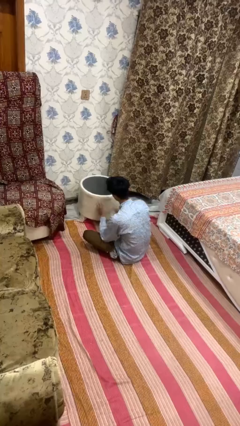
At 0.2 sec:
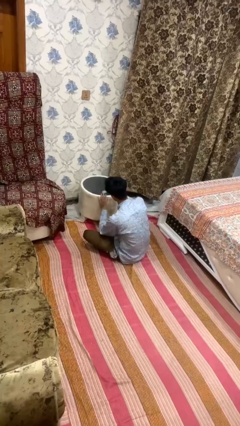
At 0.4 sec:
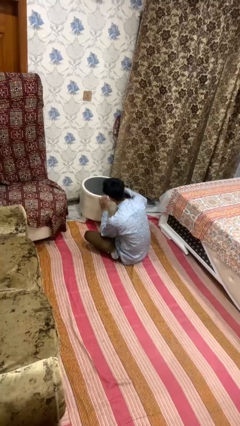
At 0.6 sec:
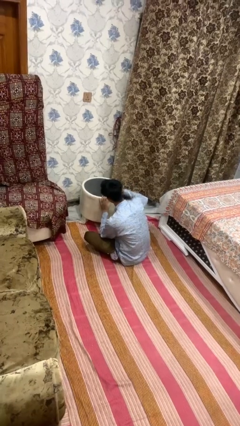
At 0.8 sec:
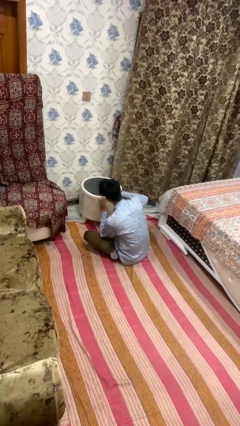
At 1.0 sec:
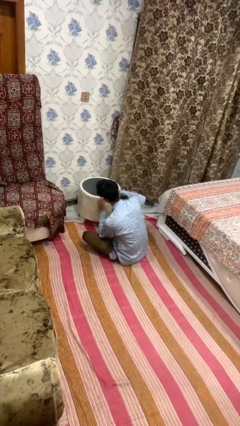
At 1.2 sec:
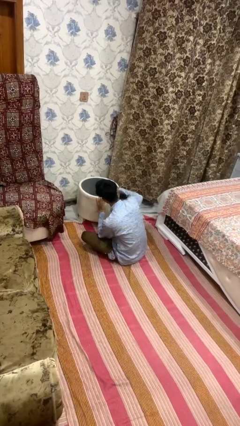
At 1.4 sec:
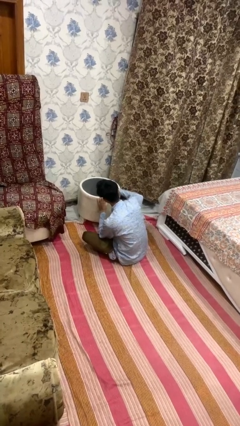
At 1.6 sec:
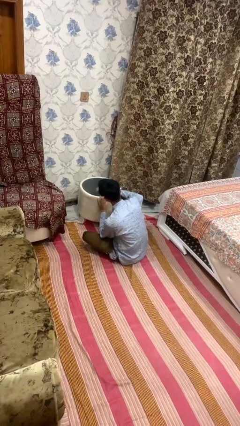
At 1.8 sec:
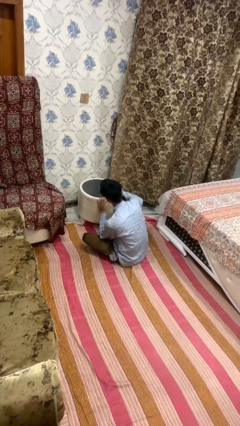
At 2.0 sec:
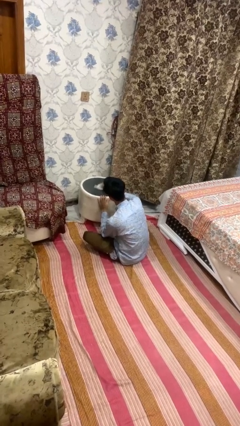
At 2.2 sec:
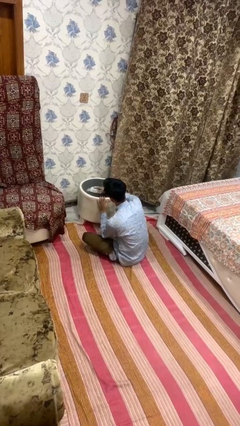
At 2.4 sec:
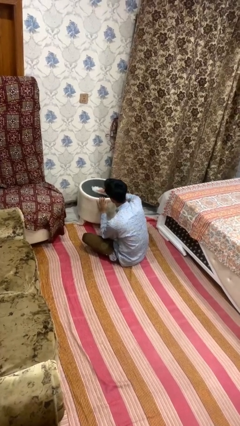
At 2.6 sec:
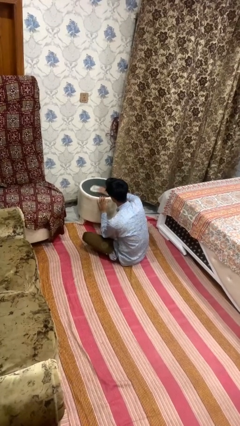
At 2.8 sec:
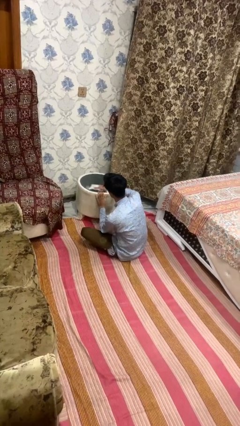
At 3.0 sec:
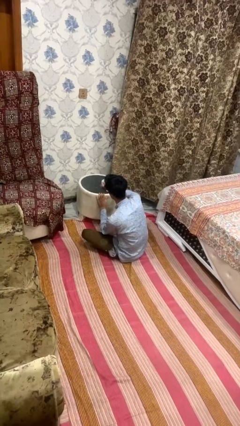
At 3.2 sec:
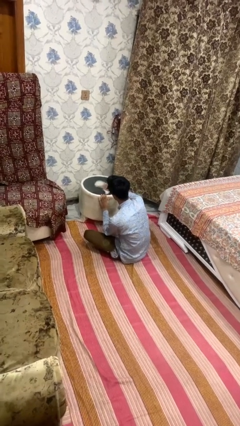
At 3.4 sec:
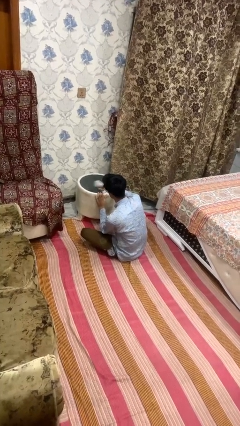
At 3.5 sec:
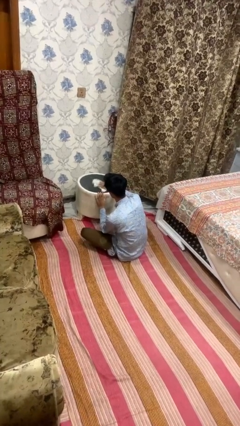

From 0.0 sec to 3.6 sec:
person cleans table with rag

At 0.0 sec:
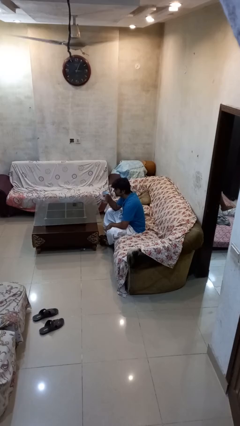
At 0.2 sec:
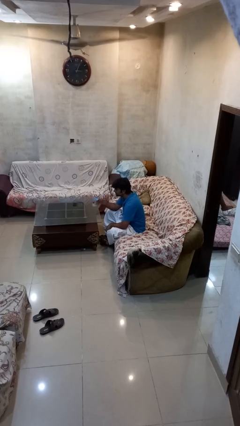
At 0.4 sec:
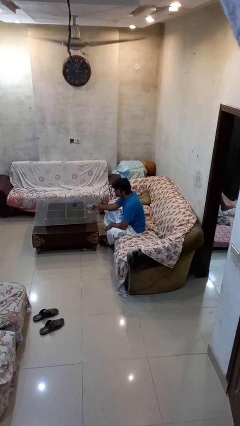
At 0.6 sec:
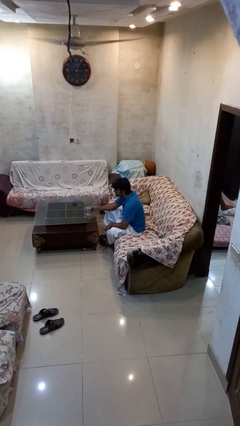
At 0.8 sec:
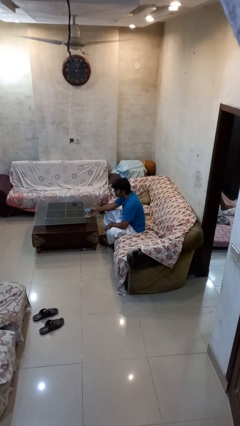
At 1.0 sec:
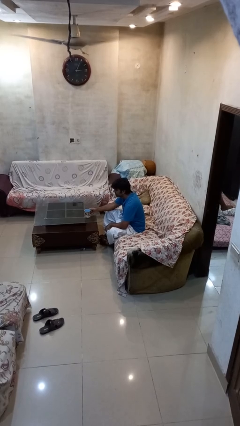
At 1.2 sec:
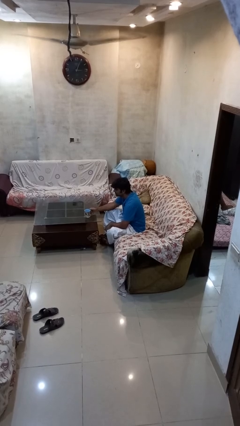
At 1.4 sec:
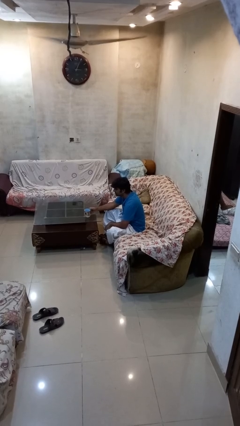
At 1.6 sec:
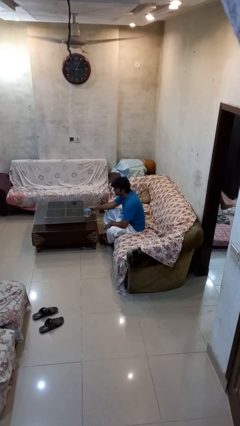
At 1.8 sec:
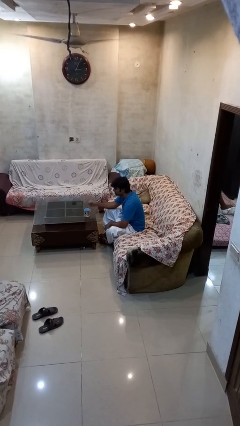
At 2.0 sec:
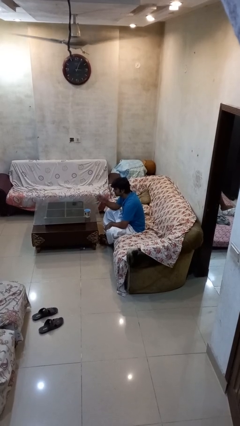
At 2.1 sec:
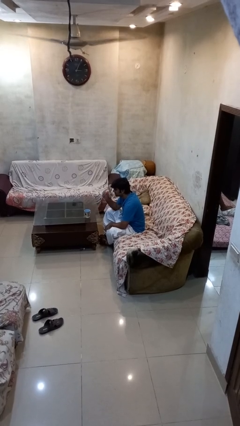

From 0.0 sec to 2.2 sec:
person puts down object on table

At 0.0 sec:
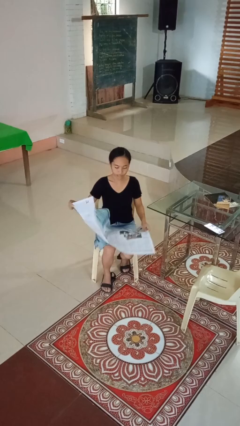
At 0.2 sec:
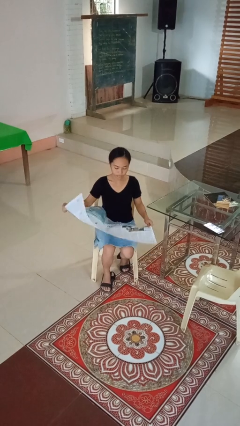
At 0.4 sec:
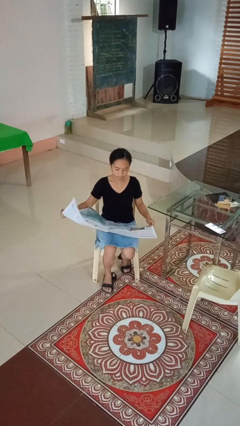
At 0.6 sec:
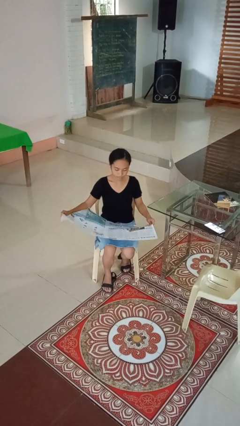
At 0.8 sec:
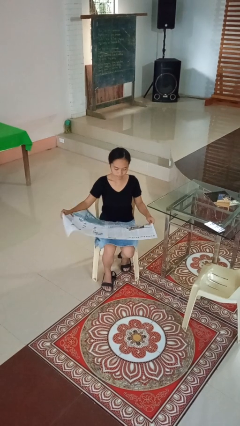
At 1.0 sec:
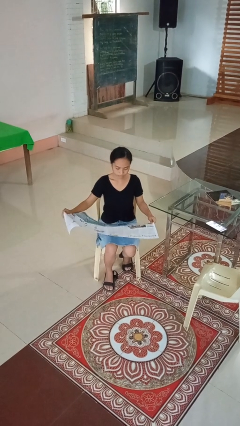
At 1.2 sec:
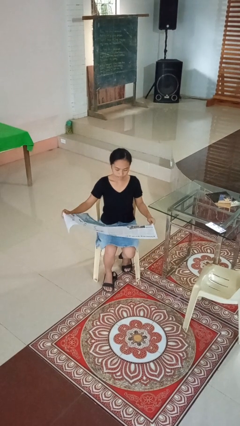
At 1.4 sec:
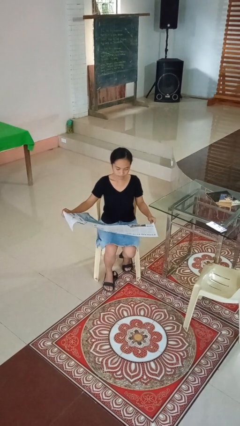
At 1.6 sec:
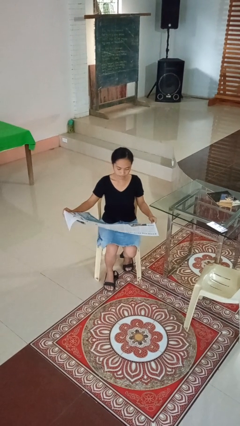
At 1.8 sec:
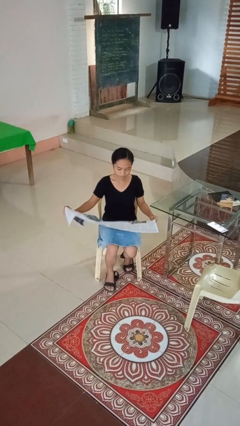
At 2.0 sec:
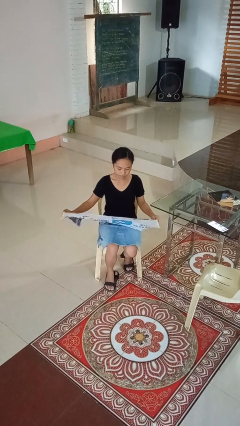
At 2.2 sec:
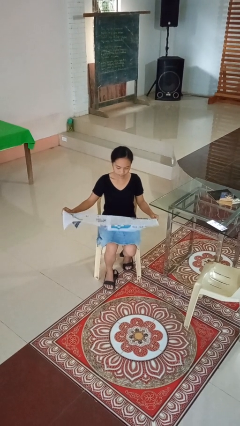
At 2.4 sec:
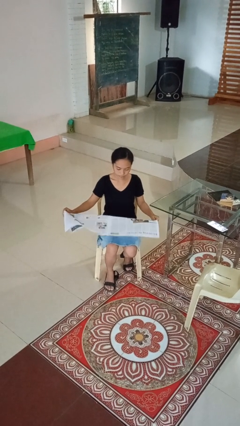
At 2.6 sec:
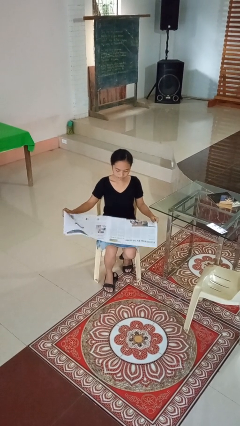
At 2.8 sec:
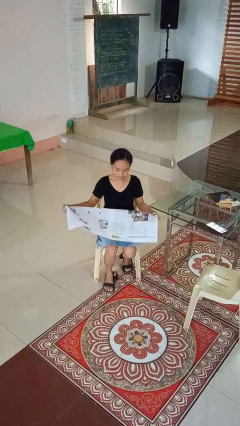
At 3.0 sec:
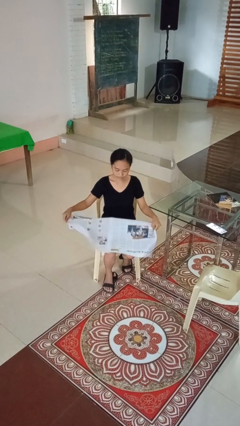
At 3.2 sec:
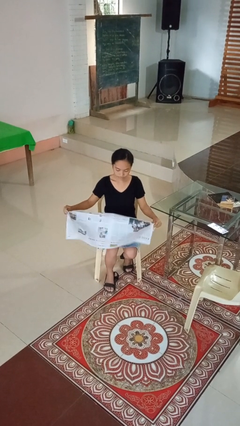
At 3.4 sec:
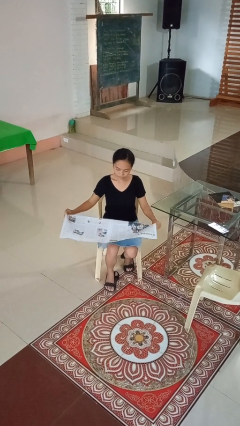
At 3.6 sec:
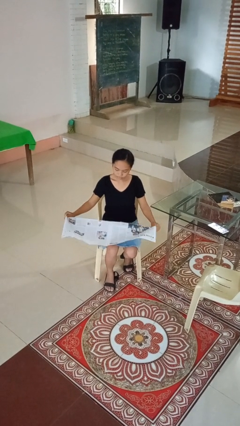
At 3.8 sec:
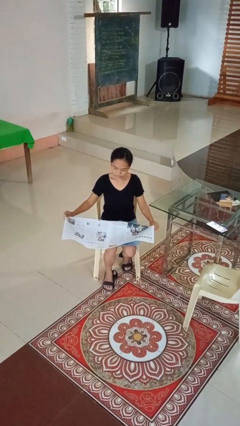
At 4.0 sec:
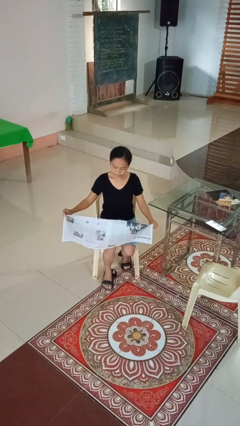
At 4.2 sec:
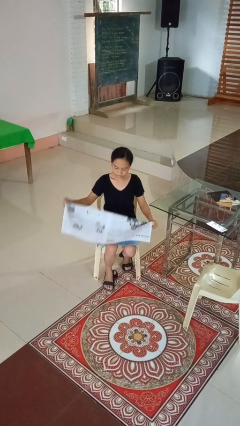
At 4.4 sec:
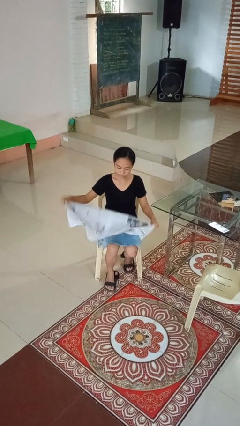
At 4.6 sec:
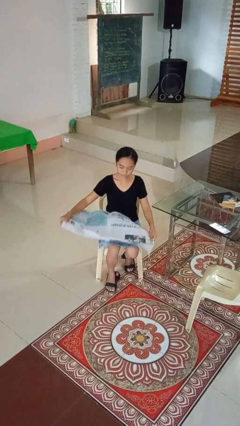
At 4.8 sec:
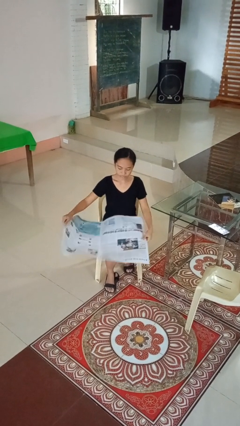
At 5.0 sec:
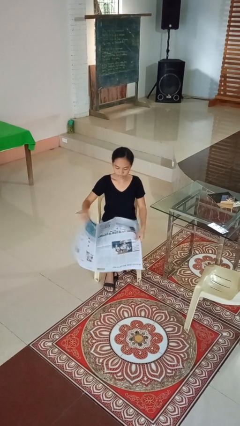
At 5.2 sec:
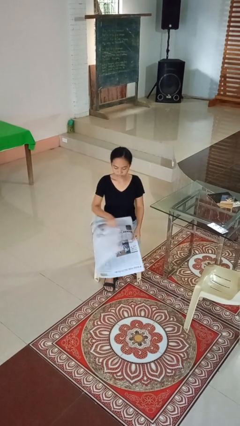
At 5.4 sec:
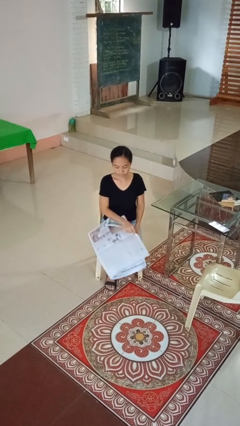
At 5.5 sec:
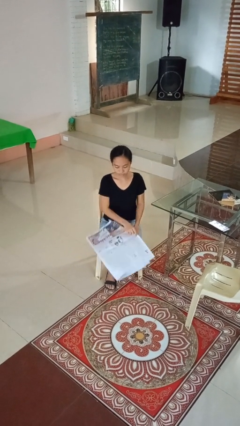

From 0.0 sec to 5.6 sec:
person reads newspaper

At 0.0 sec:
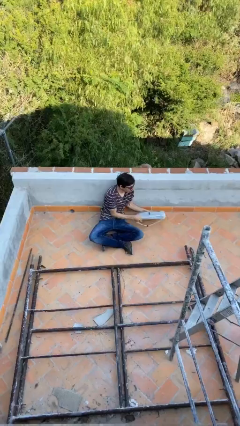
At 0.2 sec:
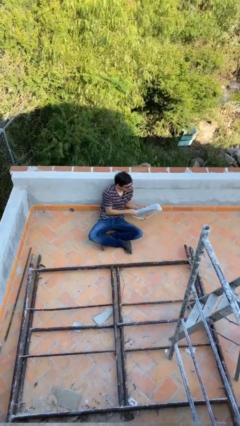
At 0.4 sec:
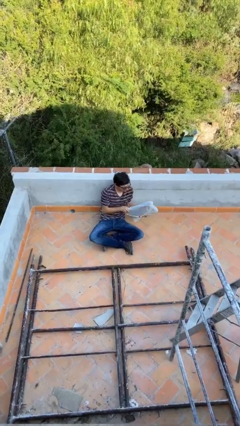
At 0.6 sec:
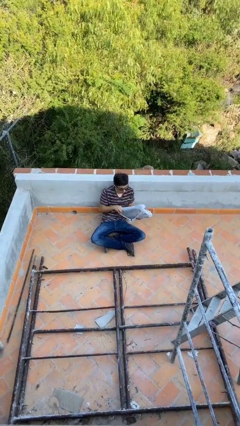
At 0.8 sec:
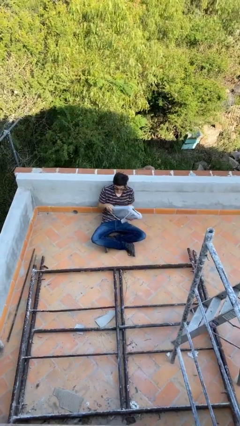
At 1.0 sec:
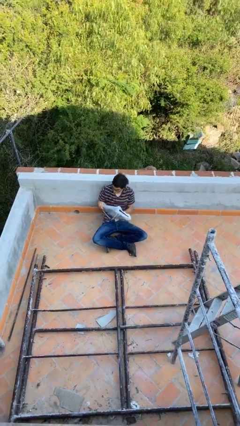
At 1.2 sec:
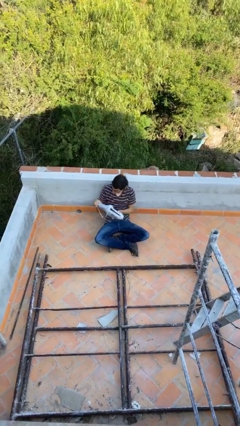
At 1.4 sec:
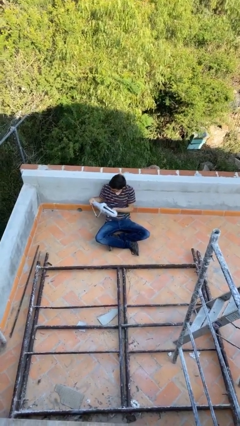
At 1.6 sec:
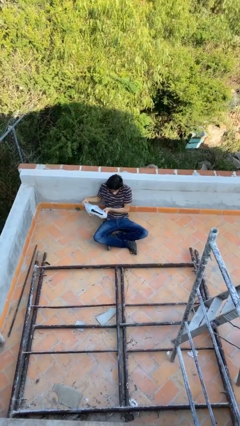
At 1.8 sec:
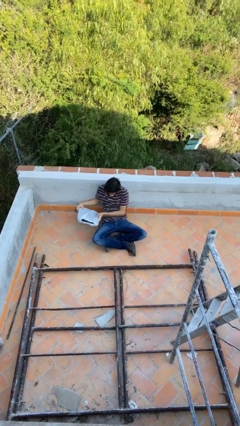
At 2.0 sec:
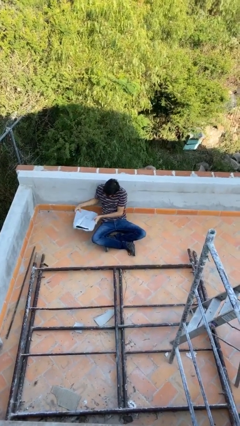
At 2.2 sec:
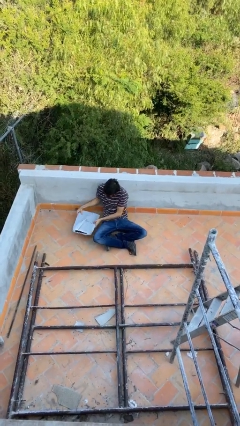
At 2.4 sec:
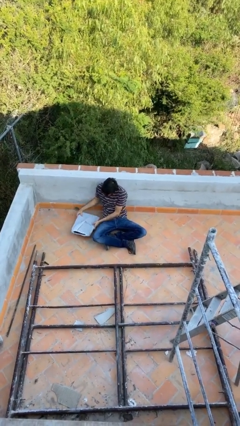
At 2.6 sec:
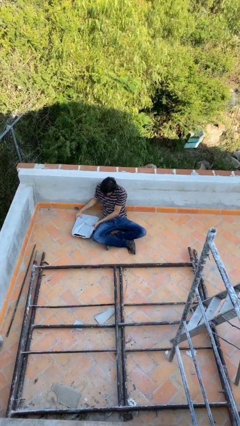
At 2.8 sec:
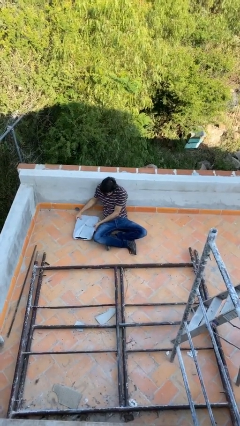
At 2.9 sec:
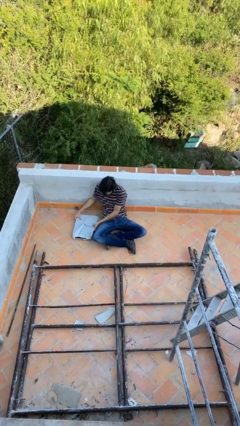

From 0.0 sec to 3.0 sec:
person picks up object from floor

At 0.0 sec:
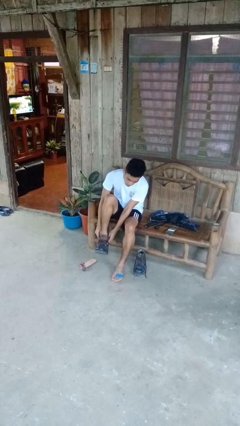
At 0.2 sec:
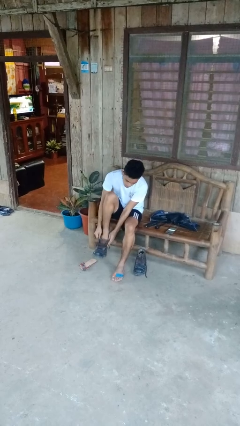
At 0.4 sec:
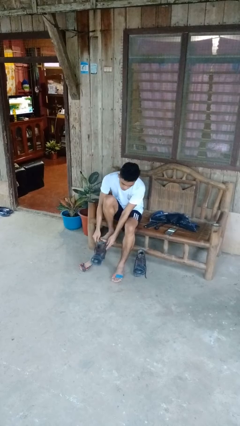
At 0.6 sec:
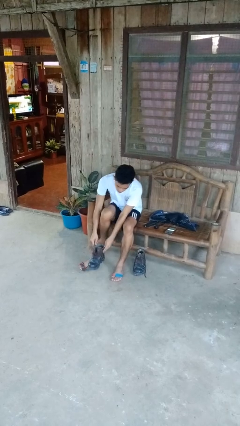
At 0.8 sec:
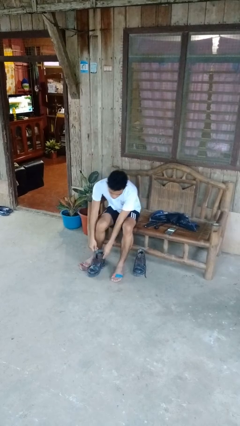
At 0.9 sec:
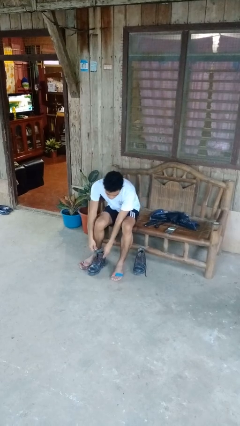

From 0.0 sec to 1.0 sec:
person takes off boots

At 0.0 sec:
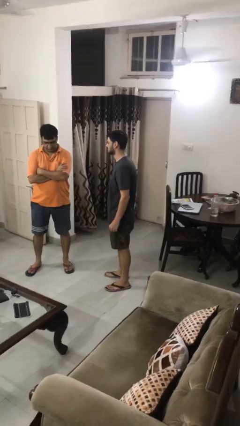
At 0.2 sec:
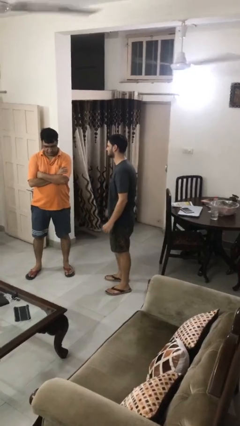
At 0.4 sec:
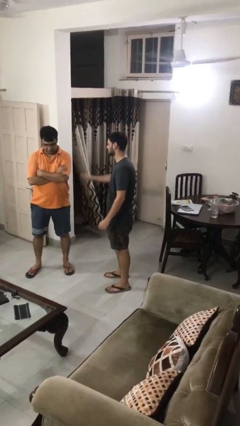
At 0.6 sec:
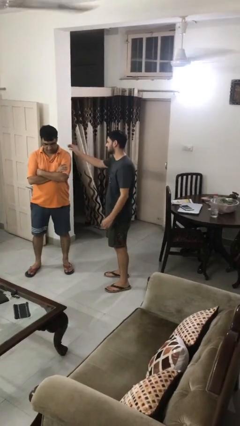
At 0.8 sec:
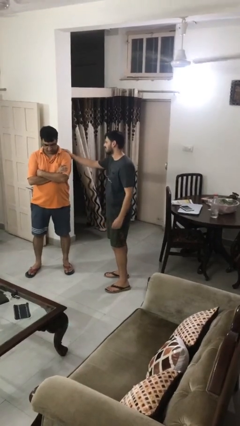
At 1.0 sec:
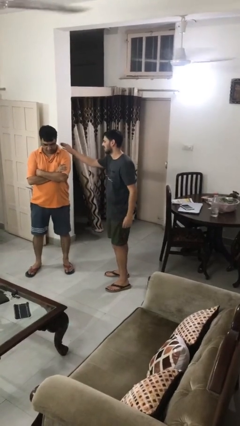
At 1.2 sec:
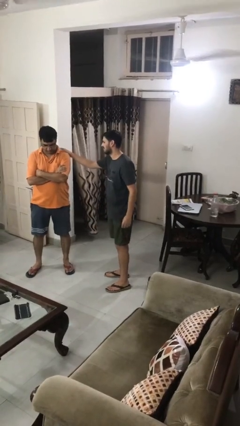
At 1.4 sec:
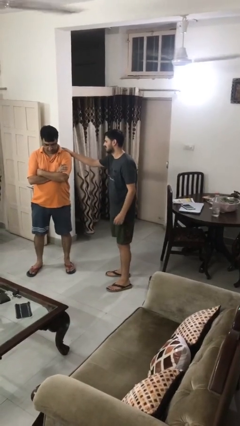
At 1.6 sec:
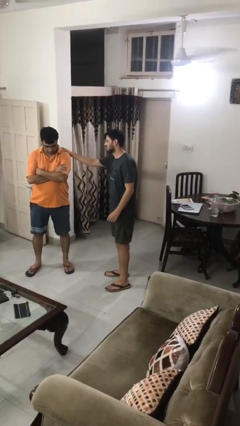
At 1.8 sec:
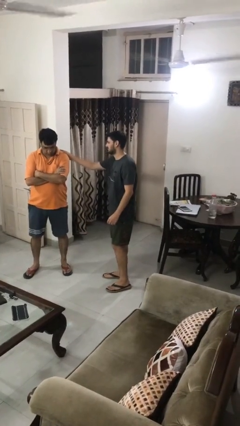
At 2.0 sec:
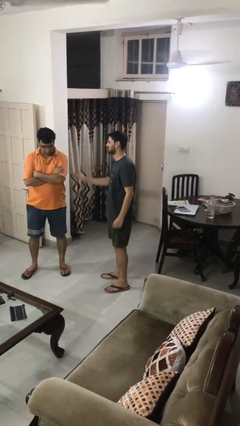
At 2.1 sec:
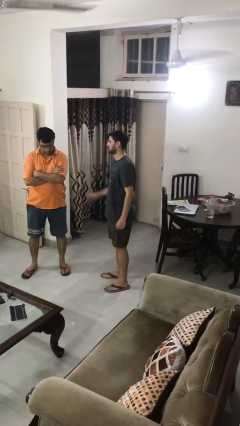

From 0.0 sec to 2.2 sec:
person pounds shoulders of person
